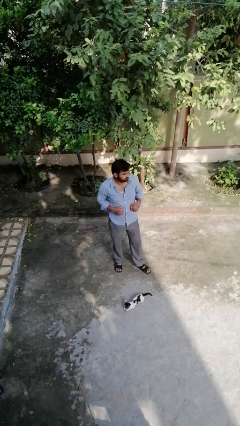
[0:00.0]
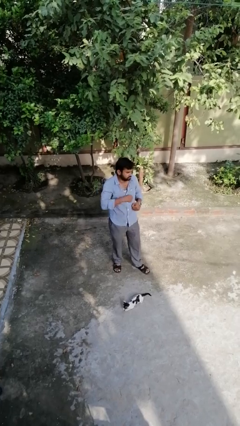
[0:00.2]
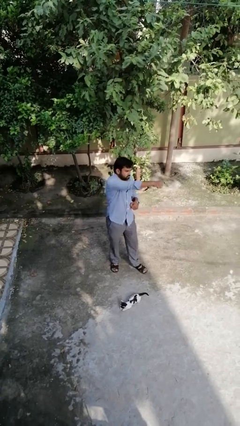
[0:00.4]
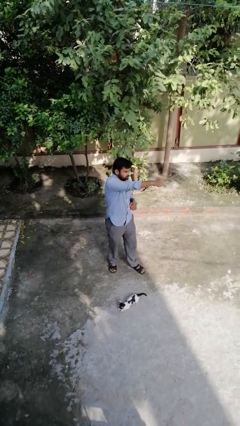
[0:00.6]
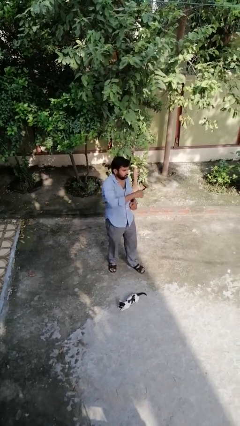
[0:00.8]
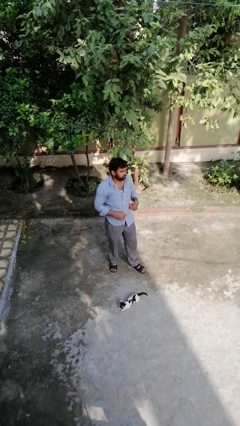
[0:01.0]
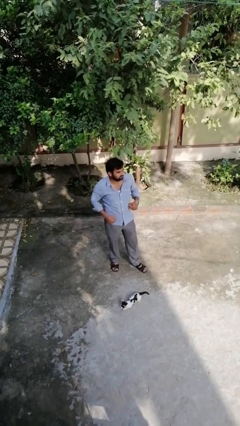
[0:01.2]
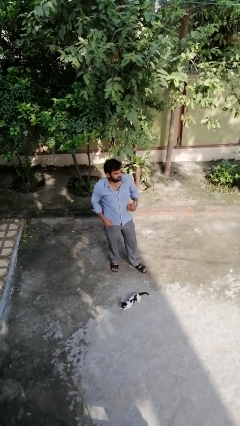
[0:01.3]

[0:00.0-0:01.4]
person punches

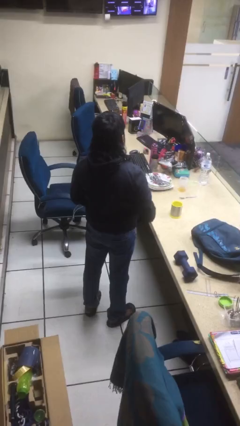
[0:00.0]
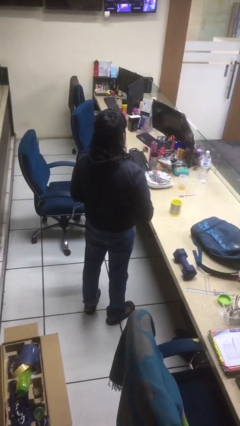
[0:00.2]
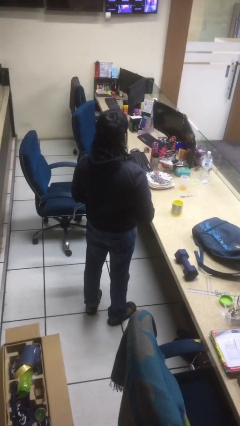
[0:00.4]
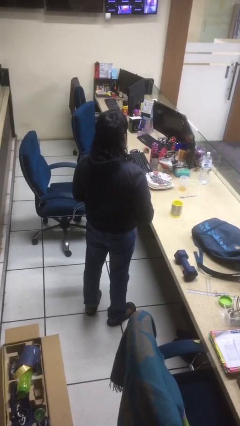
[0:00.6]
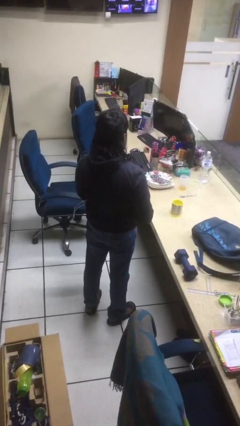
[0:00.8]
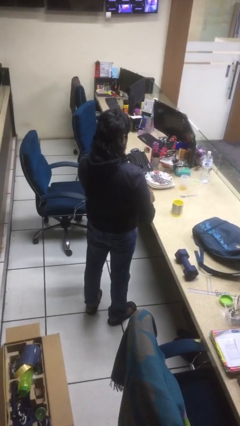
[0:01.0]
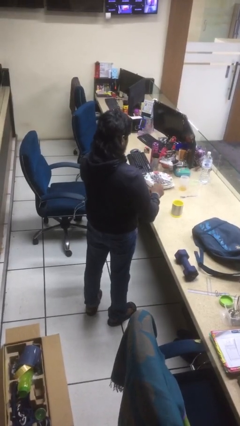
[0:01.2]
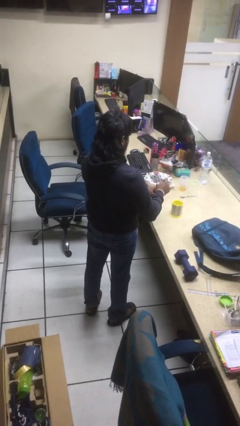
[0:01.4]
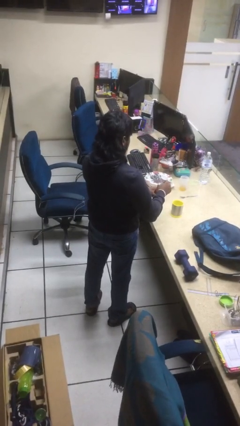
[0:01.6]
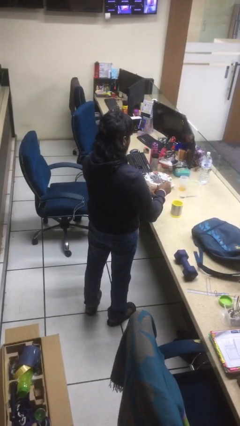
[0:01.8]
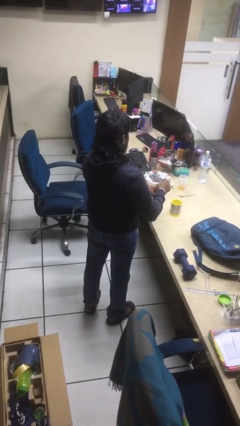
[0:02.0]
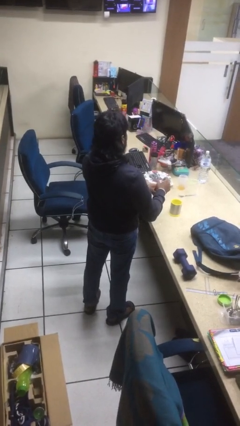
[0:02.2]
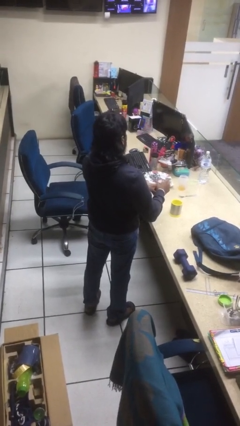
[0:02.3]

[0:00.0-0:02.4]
person opens beverage can

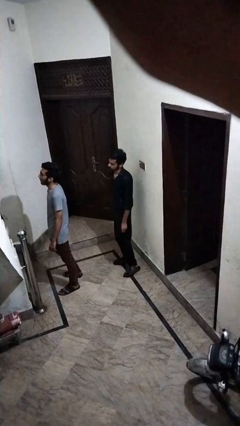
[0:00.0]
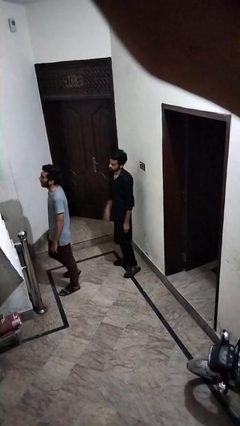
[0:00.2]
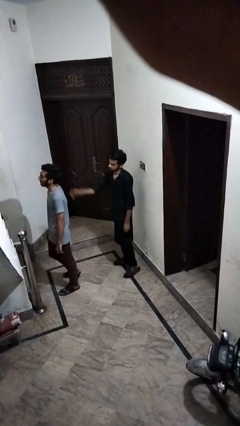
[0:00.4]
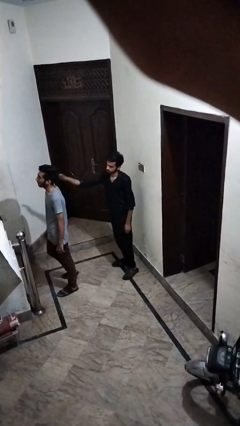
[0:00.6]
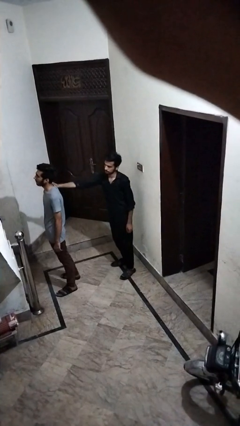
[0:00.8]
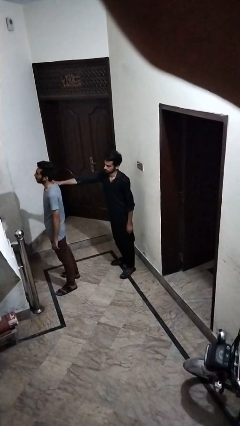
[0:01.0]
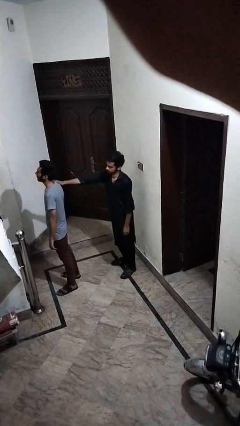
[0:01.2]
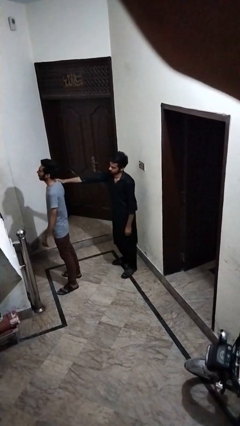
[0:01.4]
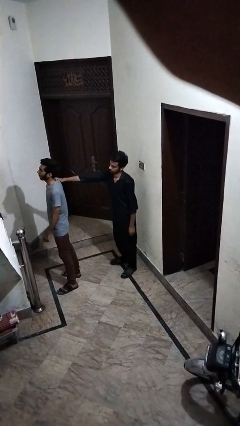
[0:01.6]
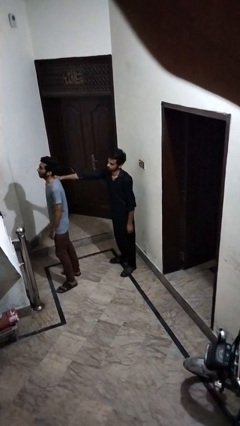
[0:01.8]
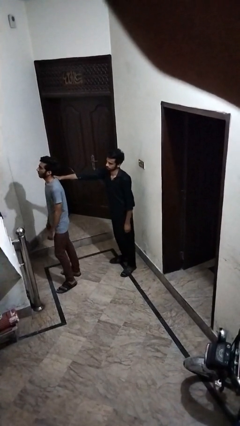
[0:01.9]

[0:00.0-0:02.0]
person grabs person by shoulder

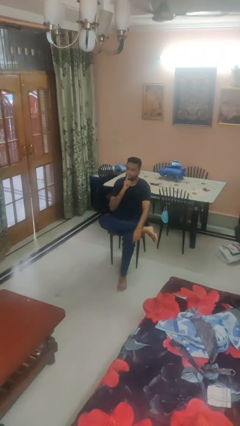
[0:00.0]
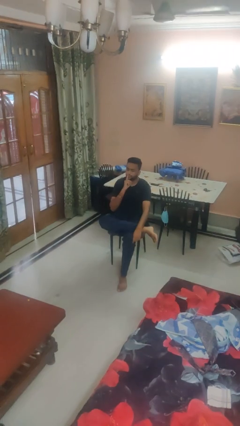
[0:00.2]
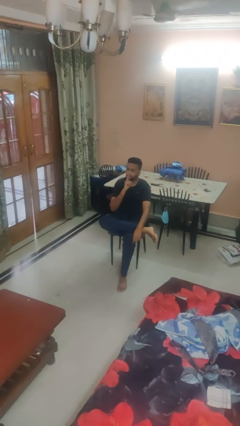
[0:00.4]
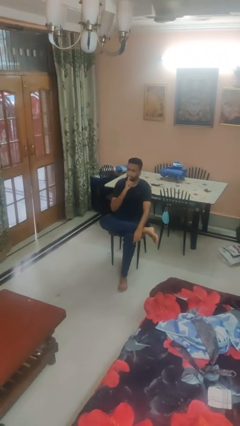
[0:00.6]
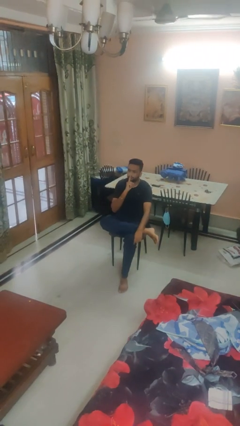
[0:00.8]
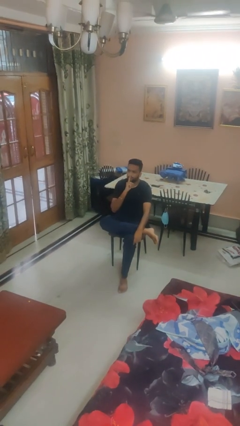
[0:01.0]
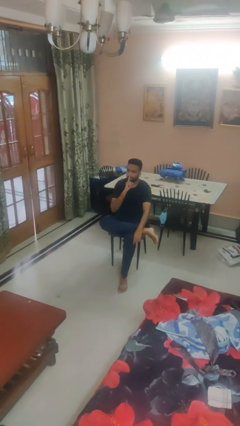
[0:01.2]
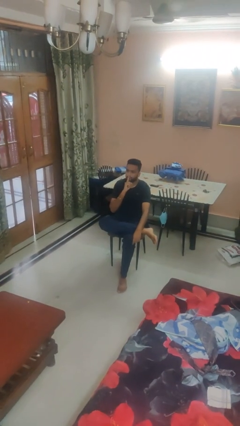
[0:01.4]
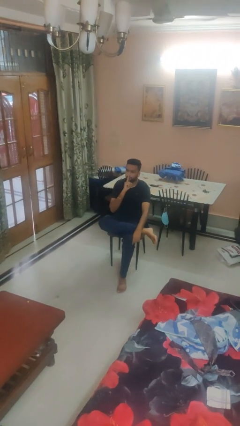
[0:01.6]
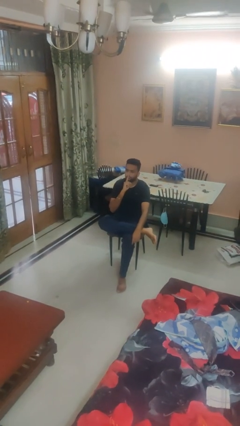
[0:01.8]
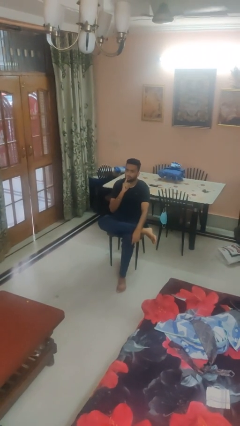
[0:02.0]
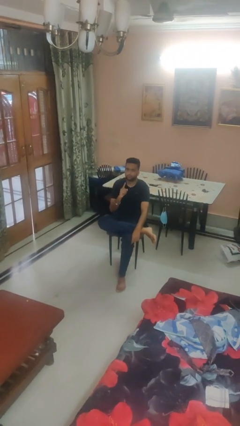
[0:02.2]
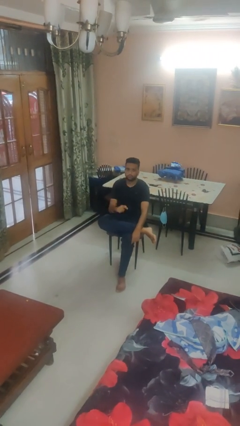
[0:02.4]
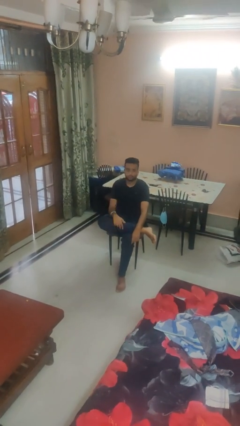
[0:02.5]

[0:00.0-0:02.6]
person gestures be quiet

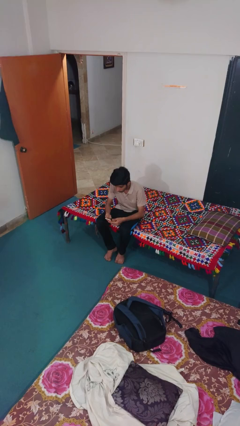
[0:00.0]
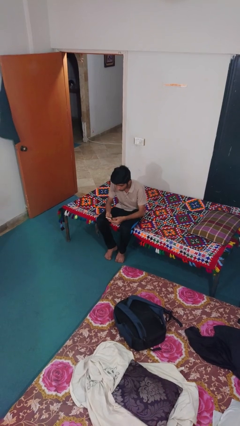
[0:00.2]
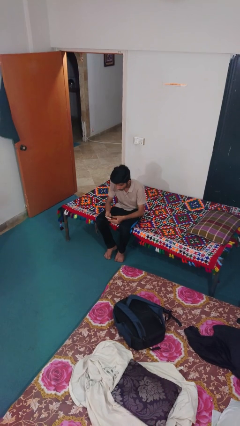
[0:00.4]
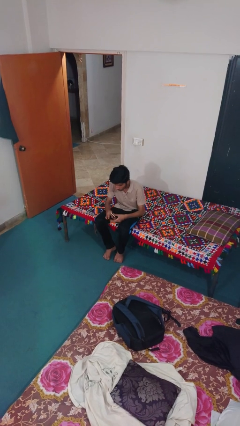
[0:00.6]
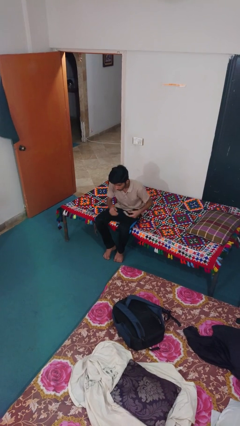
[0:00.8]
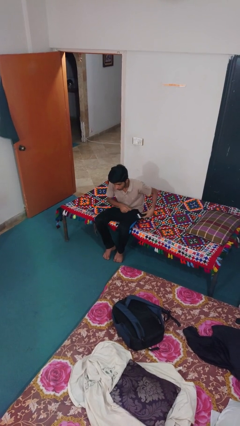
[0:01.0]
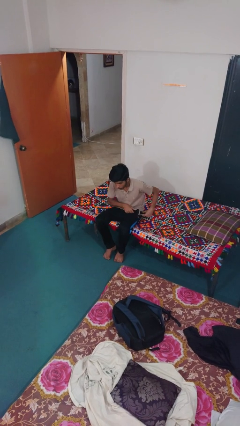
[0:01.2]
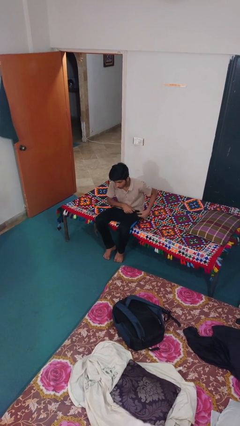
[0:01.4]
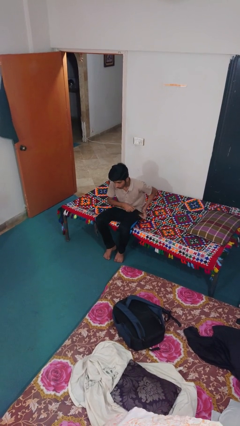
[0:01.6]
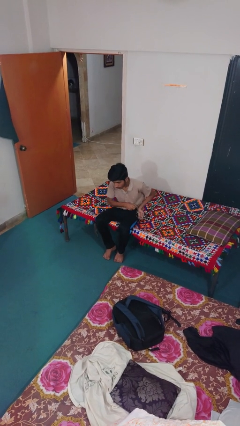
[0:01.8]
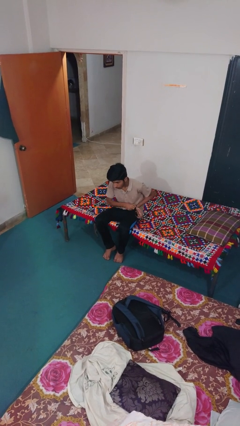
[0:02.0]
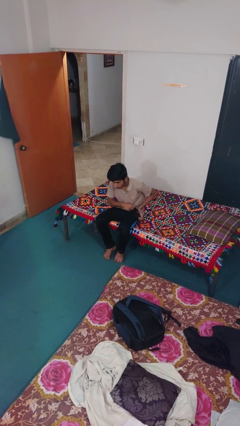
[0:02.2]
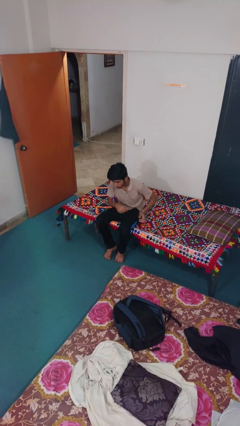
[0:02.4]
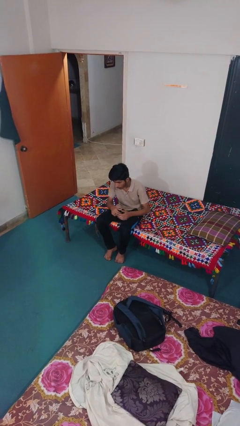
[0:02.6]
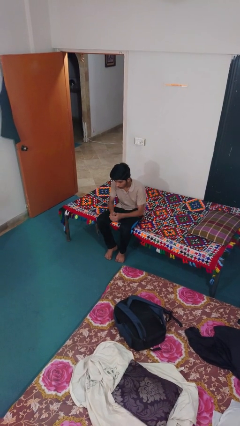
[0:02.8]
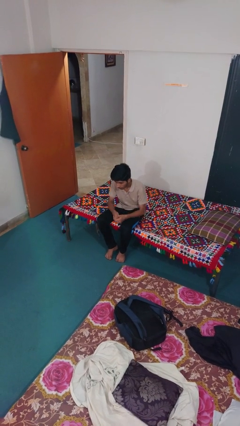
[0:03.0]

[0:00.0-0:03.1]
person puts phone into pocket

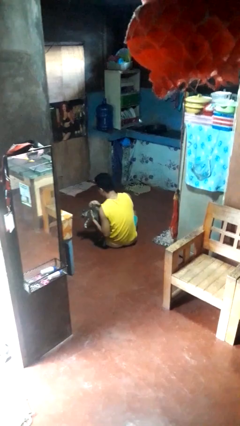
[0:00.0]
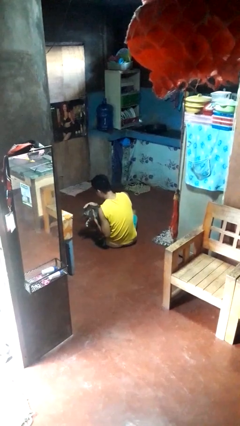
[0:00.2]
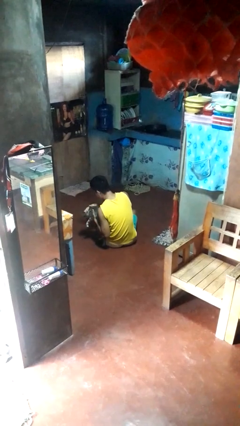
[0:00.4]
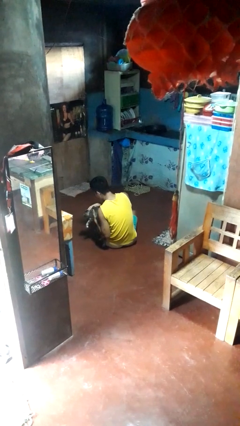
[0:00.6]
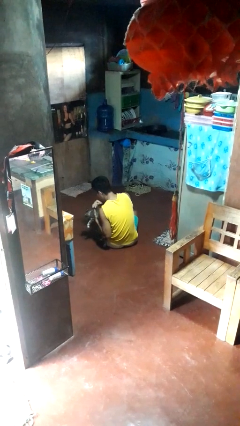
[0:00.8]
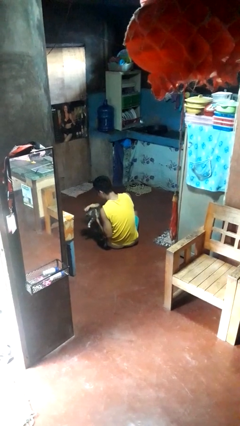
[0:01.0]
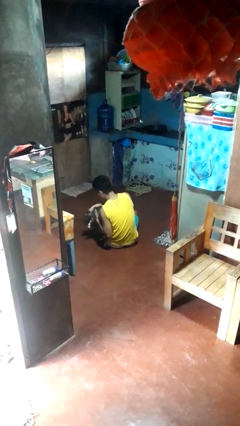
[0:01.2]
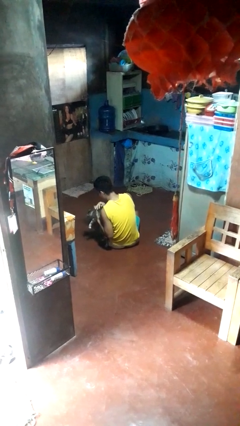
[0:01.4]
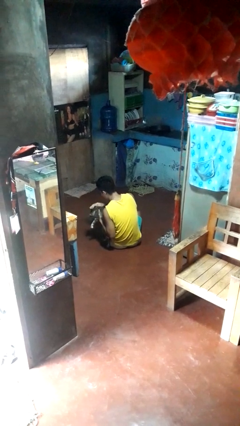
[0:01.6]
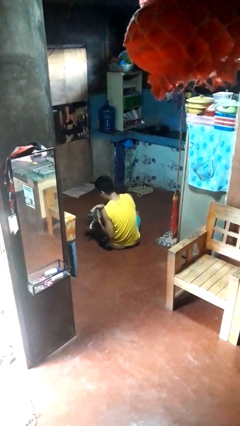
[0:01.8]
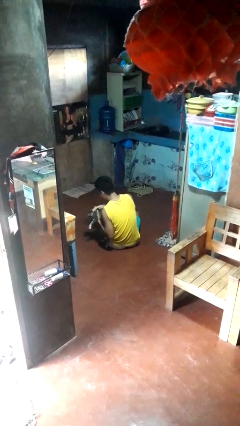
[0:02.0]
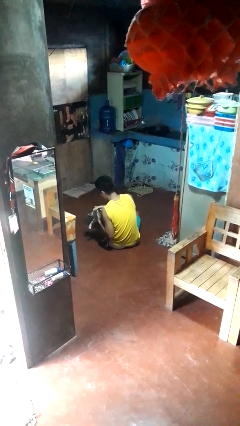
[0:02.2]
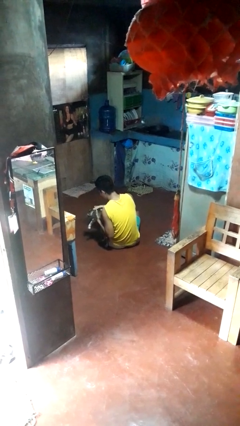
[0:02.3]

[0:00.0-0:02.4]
person hugs cat

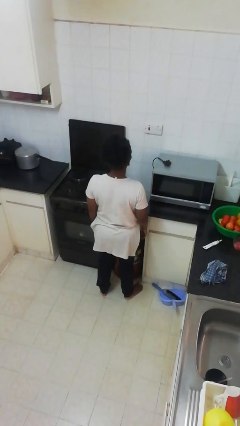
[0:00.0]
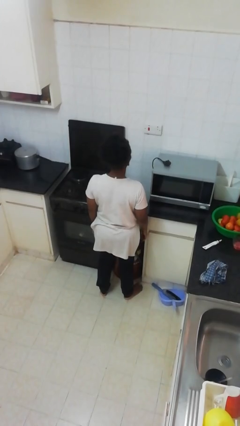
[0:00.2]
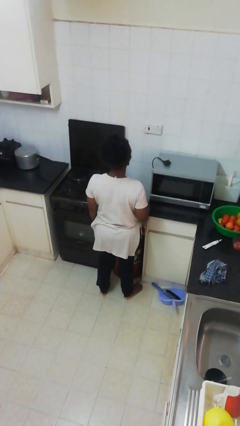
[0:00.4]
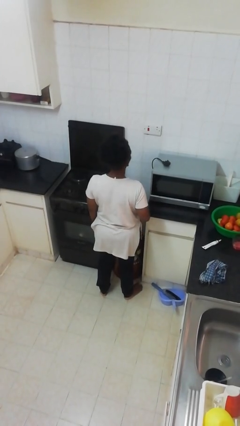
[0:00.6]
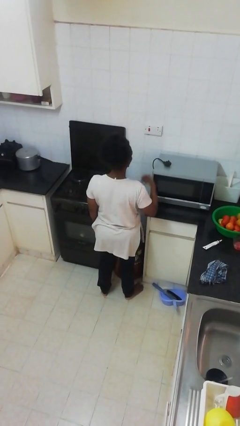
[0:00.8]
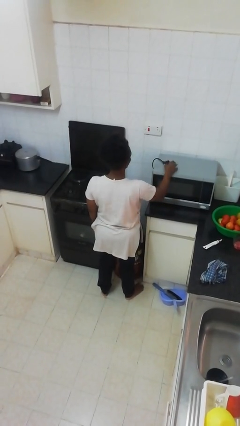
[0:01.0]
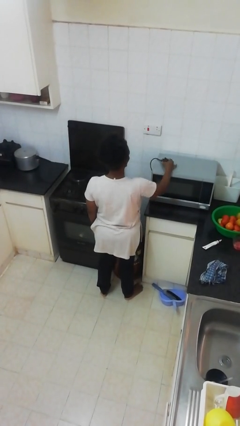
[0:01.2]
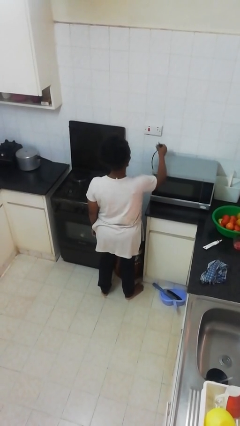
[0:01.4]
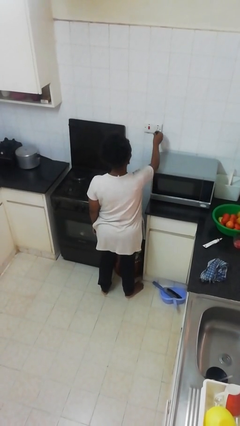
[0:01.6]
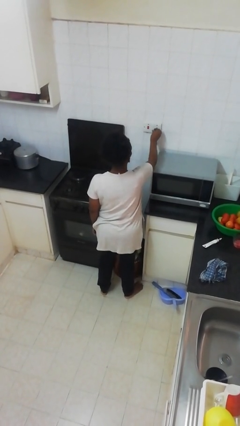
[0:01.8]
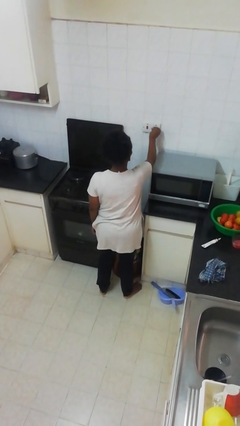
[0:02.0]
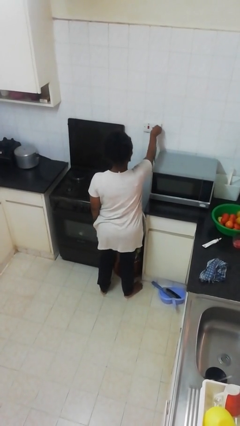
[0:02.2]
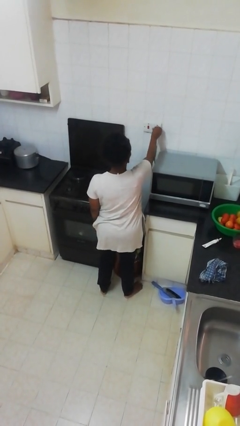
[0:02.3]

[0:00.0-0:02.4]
person plugs into electrical socket

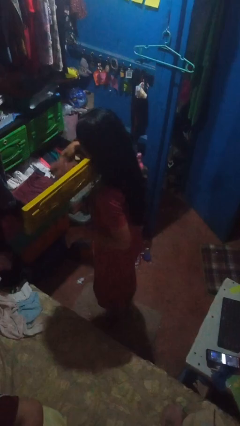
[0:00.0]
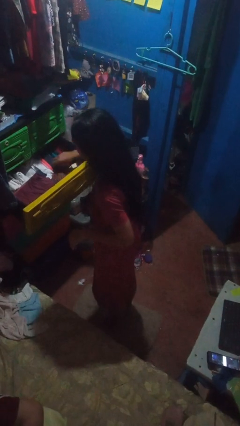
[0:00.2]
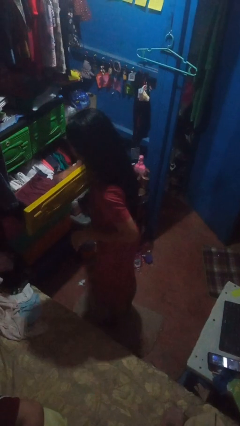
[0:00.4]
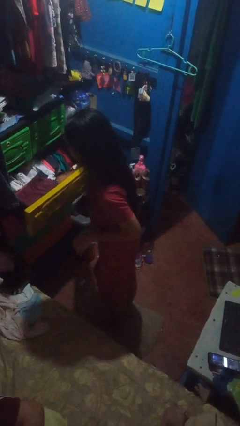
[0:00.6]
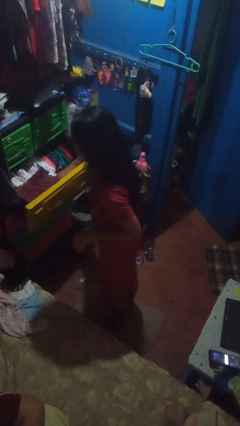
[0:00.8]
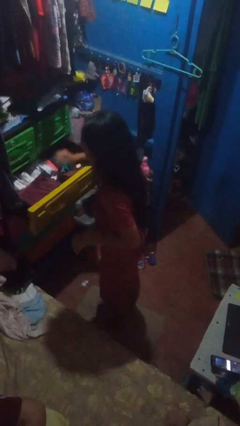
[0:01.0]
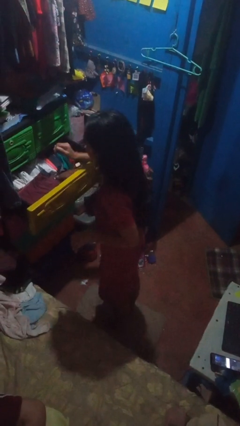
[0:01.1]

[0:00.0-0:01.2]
person puts clothes into dresser
